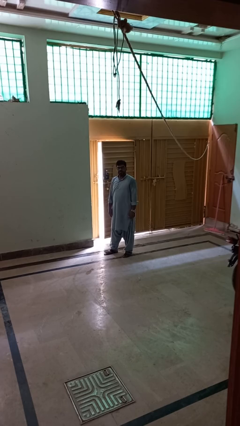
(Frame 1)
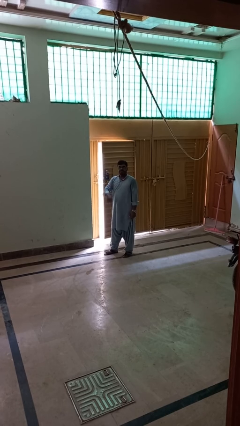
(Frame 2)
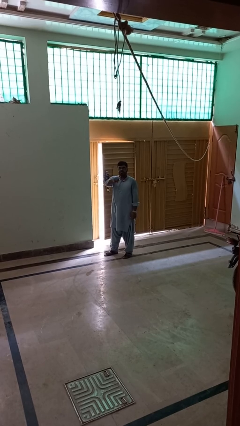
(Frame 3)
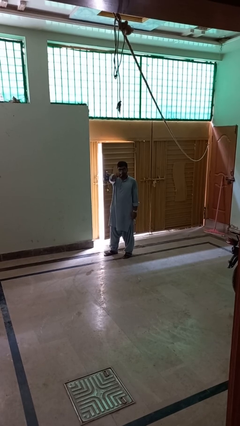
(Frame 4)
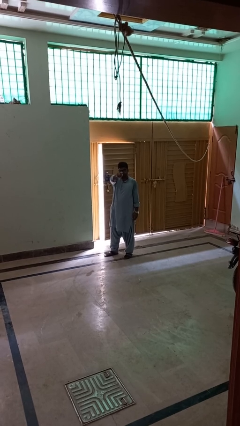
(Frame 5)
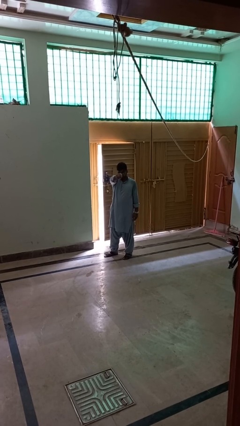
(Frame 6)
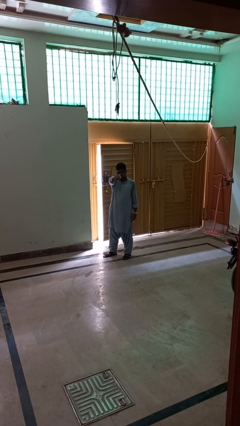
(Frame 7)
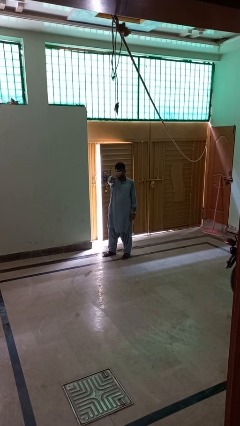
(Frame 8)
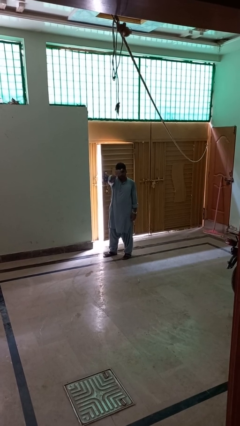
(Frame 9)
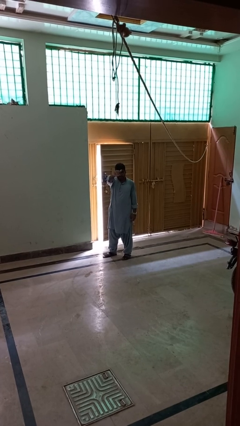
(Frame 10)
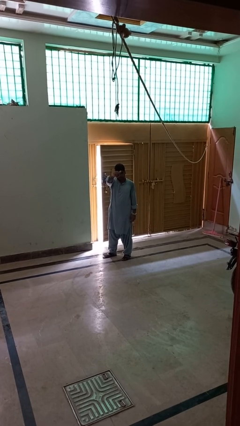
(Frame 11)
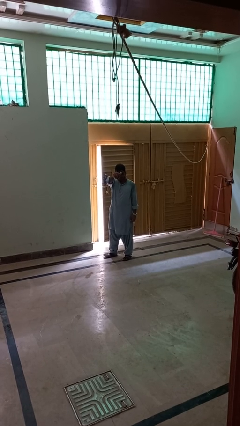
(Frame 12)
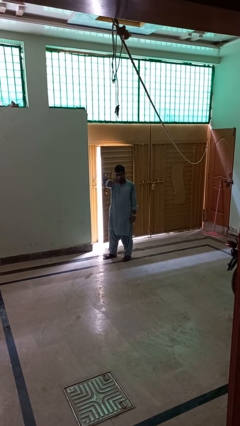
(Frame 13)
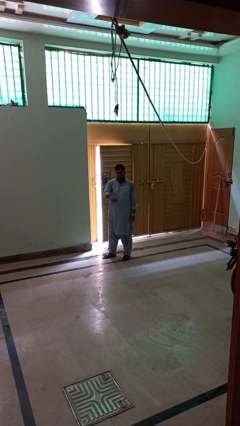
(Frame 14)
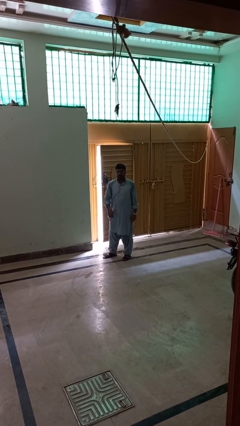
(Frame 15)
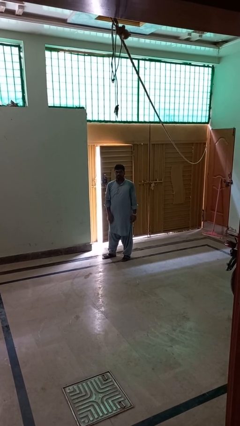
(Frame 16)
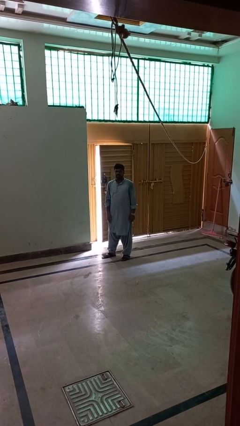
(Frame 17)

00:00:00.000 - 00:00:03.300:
person gestures come here

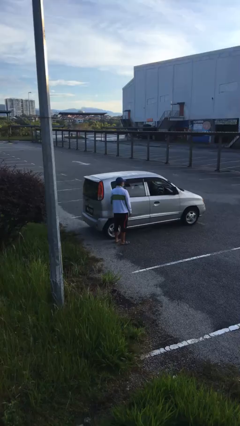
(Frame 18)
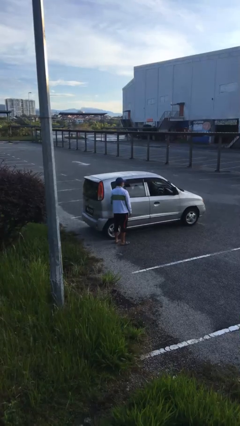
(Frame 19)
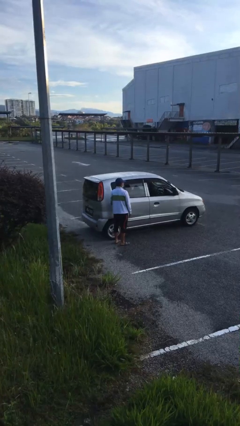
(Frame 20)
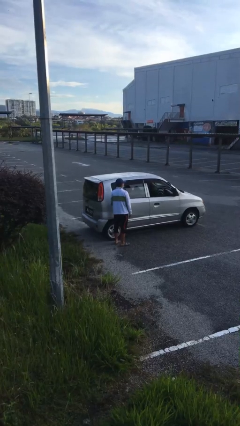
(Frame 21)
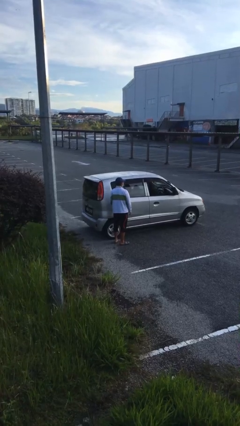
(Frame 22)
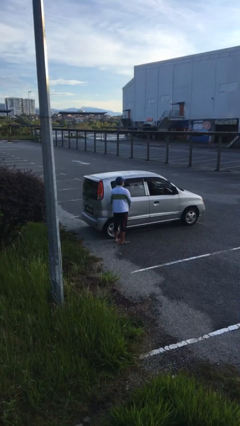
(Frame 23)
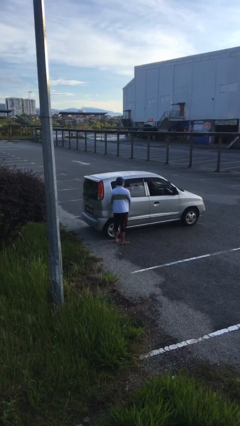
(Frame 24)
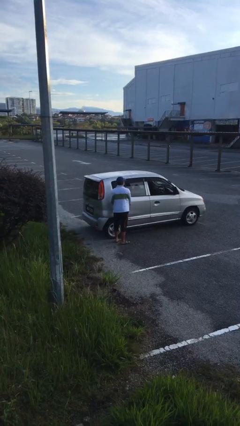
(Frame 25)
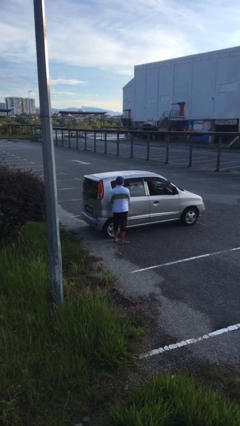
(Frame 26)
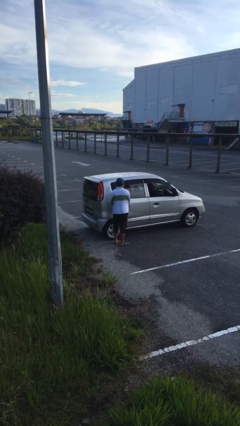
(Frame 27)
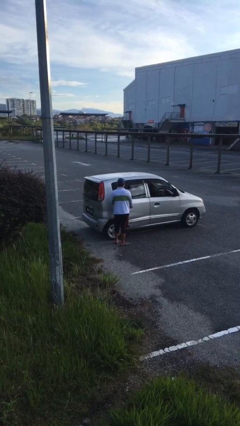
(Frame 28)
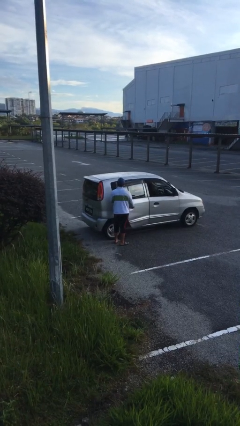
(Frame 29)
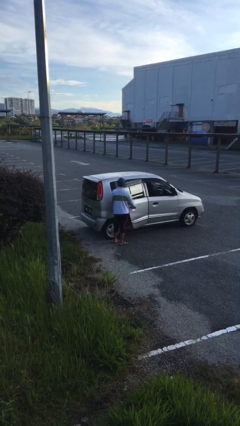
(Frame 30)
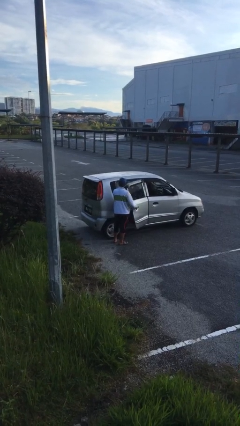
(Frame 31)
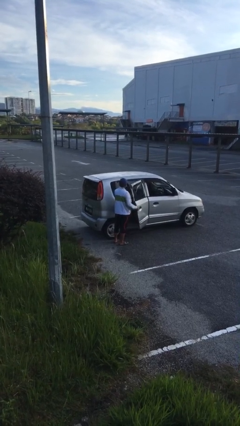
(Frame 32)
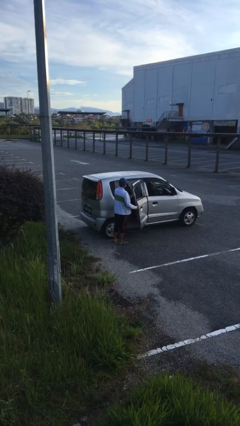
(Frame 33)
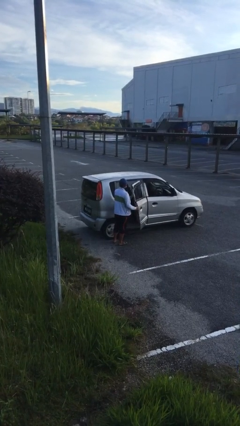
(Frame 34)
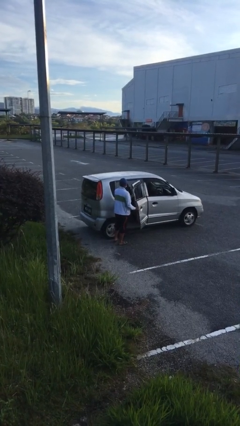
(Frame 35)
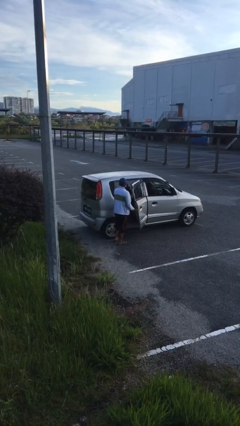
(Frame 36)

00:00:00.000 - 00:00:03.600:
person opens car door

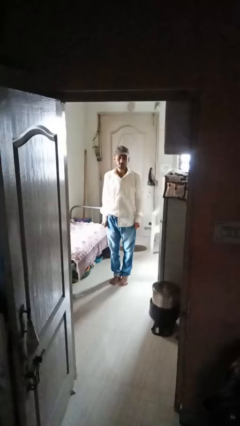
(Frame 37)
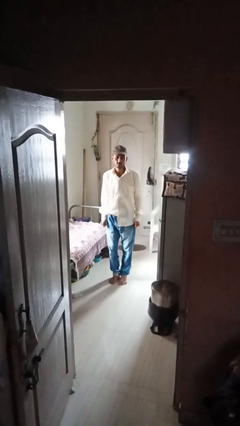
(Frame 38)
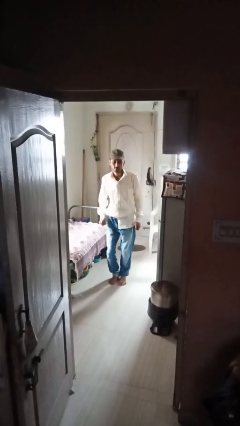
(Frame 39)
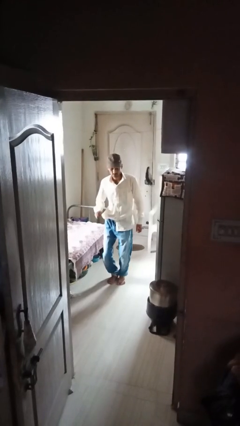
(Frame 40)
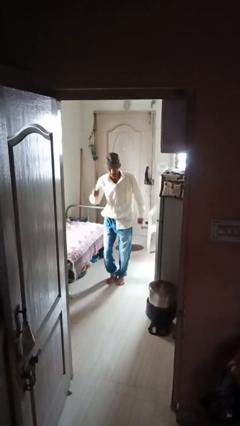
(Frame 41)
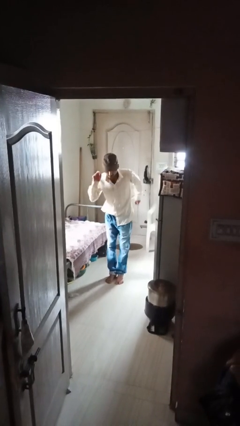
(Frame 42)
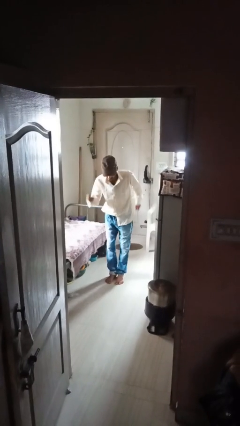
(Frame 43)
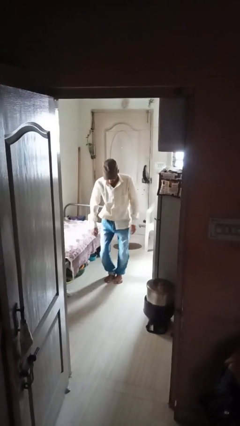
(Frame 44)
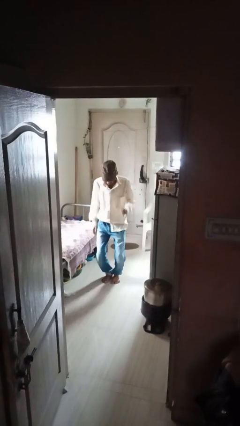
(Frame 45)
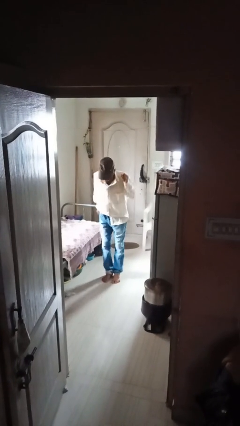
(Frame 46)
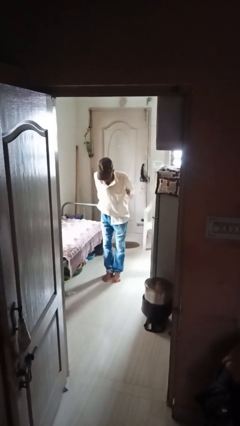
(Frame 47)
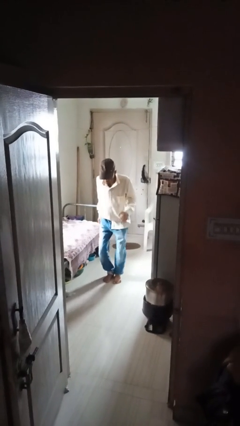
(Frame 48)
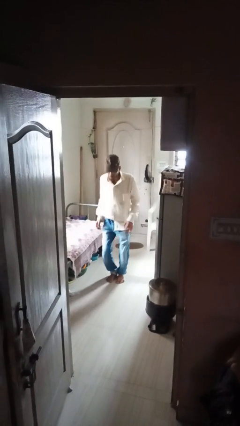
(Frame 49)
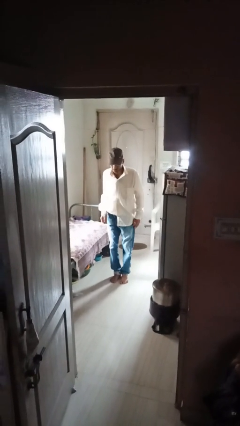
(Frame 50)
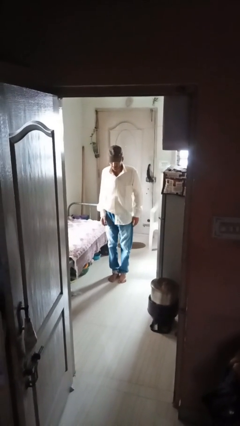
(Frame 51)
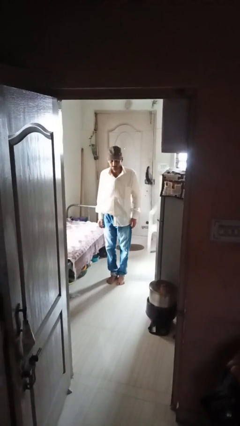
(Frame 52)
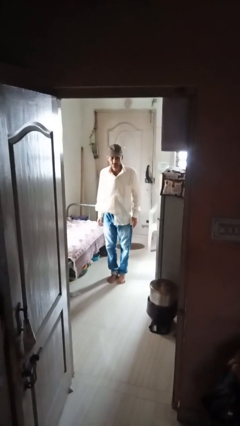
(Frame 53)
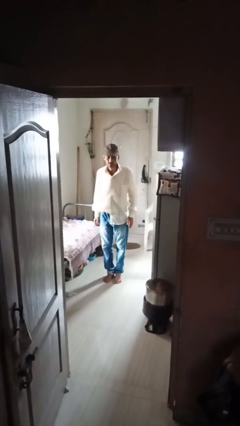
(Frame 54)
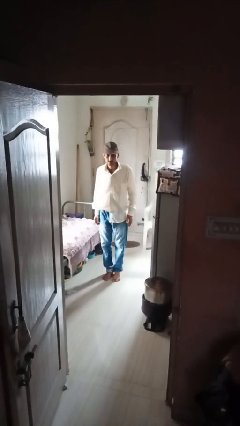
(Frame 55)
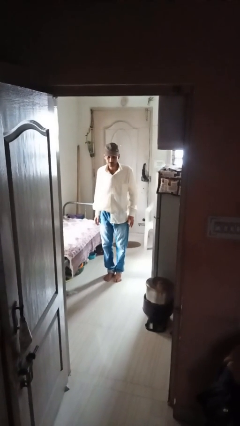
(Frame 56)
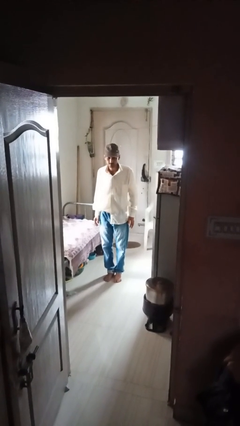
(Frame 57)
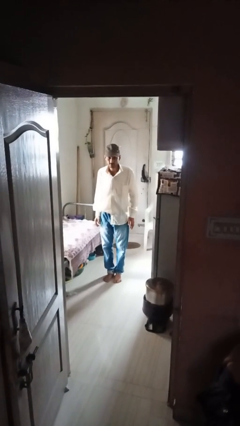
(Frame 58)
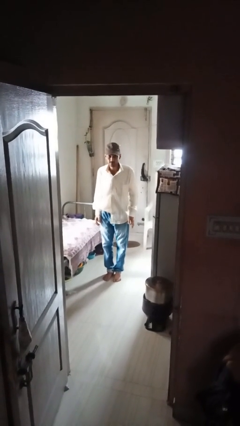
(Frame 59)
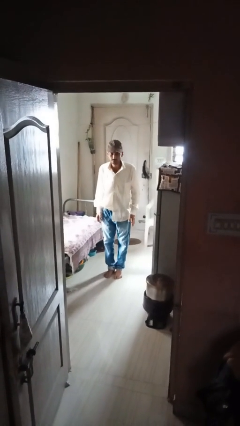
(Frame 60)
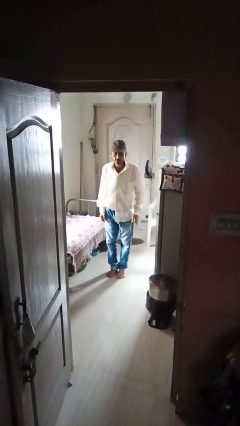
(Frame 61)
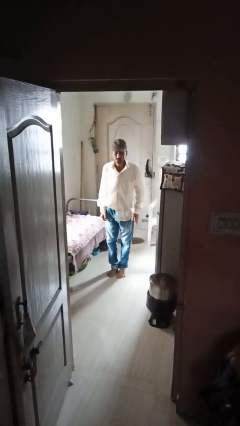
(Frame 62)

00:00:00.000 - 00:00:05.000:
person dances in place

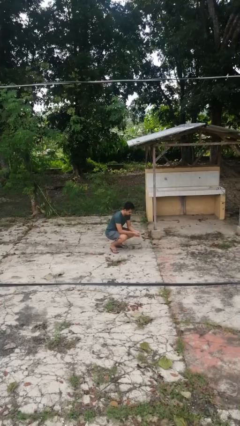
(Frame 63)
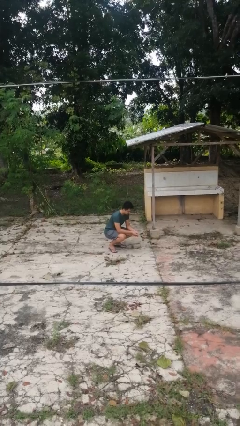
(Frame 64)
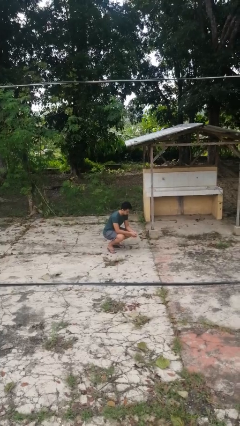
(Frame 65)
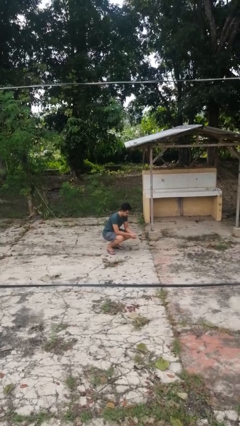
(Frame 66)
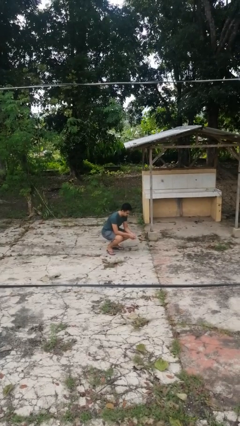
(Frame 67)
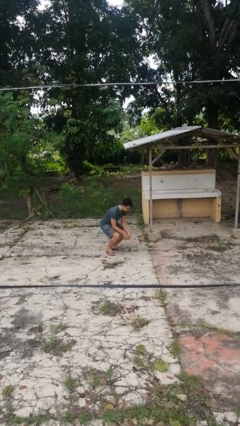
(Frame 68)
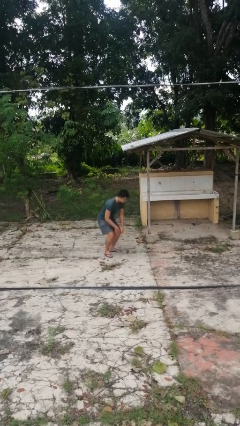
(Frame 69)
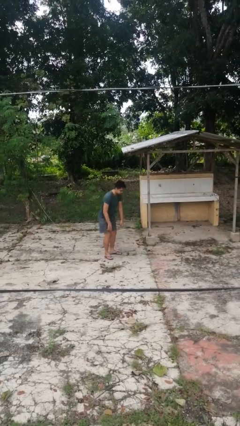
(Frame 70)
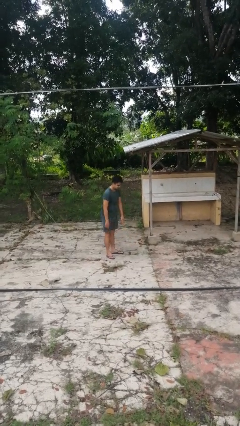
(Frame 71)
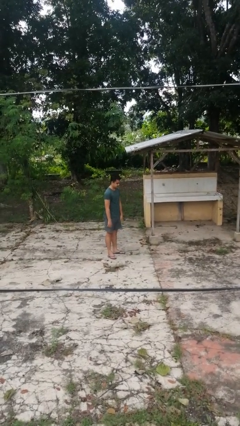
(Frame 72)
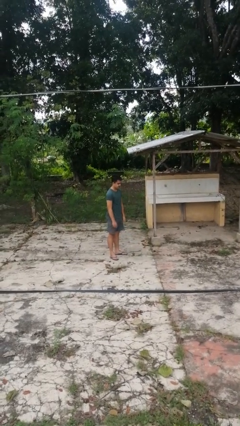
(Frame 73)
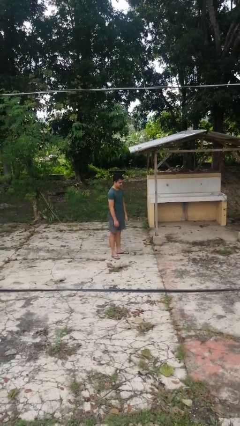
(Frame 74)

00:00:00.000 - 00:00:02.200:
person stands up

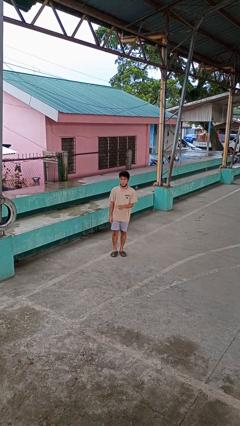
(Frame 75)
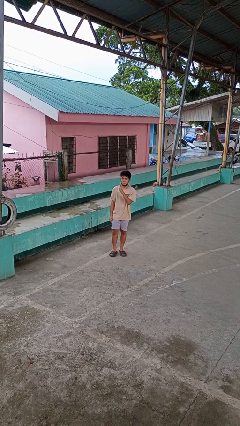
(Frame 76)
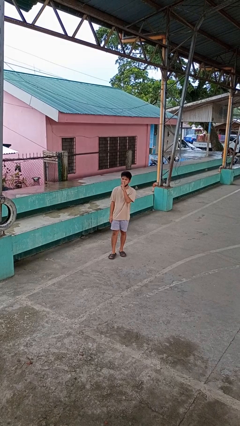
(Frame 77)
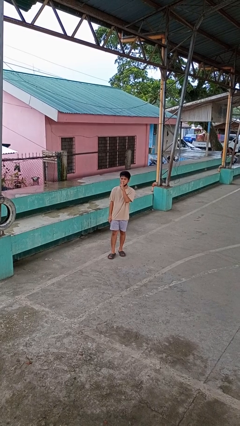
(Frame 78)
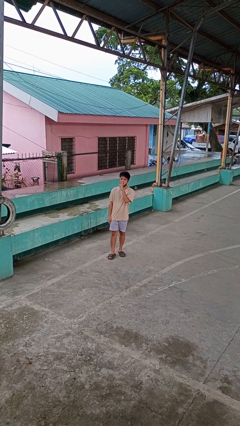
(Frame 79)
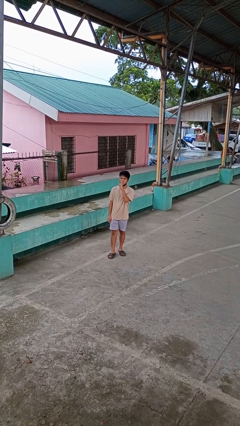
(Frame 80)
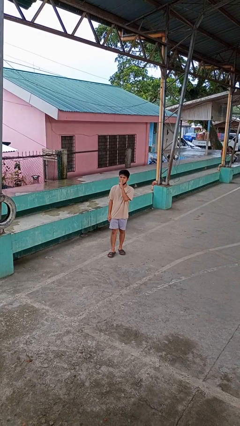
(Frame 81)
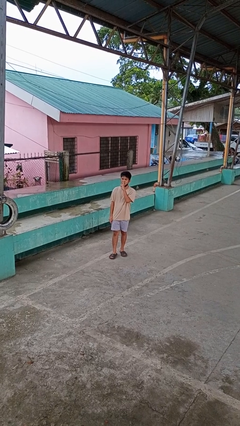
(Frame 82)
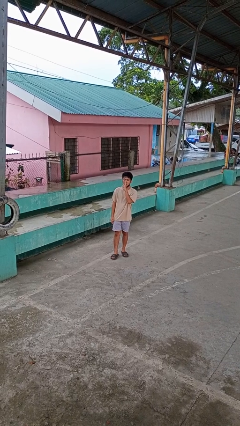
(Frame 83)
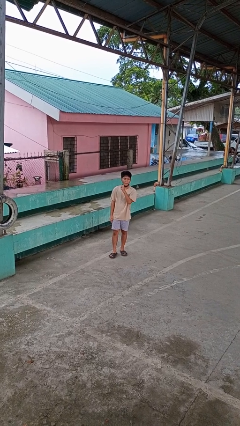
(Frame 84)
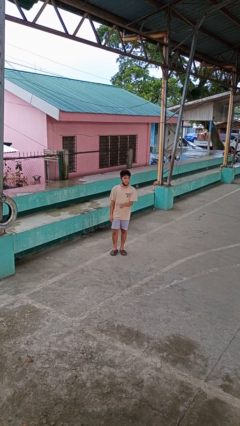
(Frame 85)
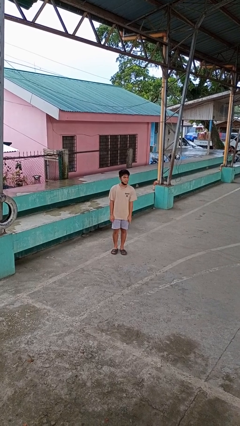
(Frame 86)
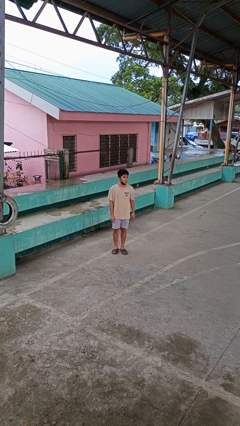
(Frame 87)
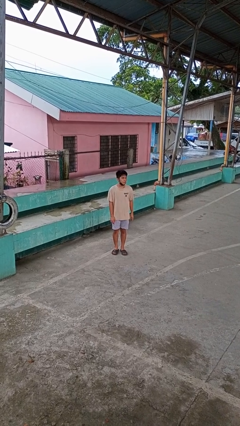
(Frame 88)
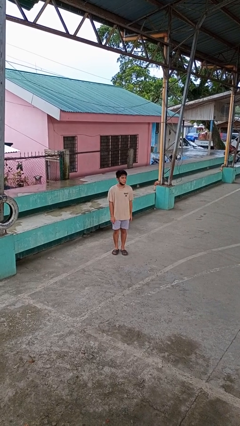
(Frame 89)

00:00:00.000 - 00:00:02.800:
person gestures be quiet

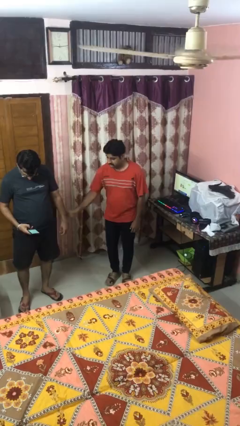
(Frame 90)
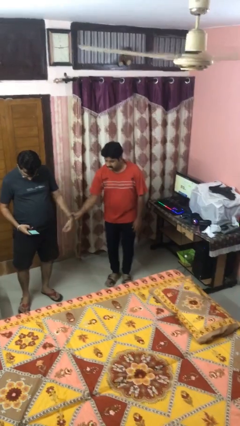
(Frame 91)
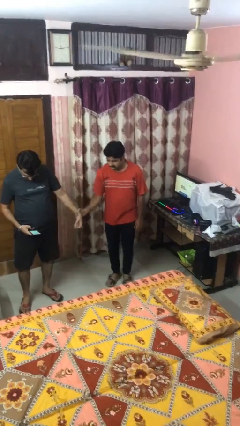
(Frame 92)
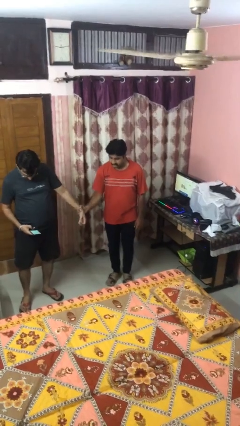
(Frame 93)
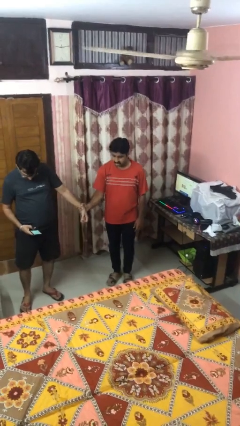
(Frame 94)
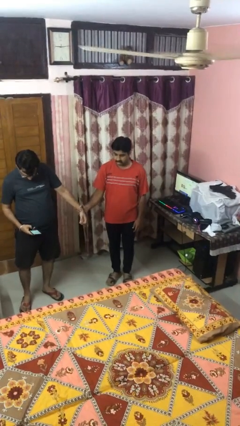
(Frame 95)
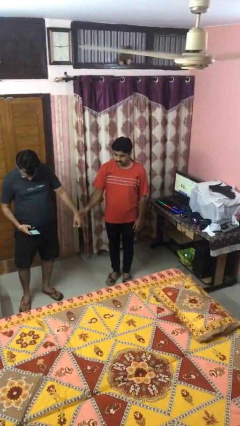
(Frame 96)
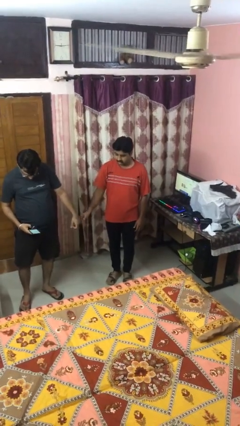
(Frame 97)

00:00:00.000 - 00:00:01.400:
person grabs person by forearm
